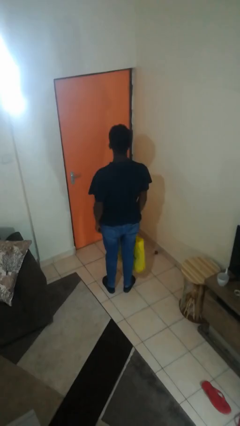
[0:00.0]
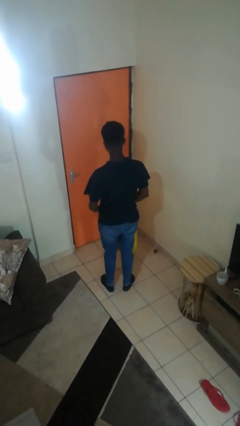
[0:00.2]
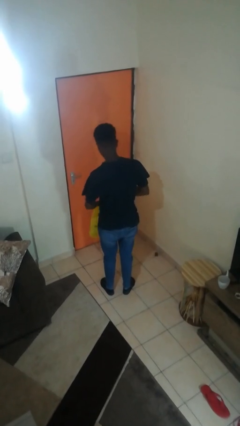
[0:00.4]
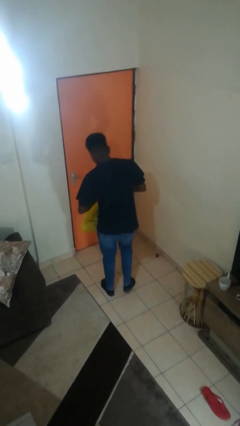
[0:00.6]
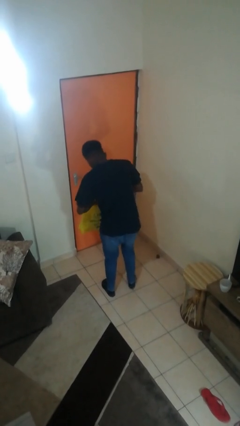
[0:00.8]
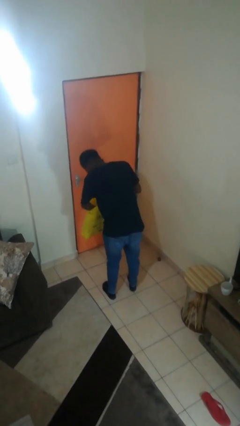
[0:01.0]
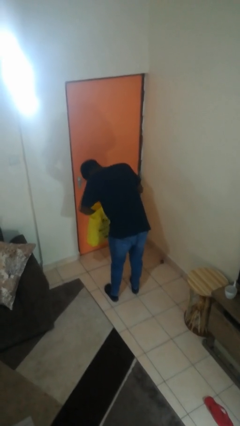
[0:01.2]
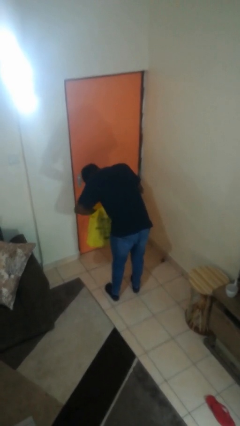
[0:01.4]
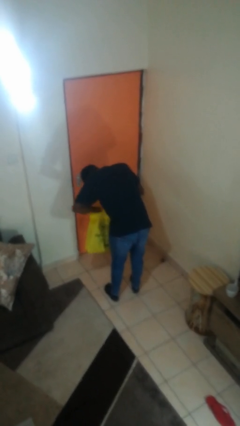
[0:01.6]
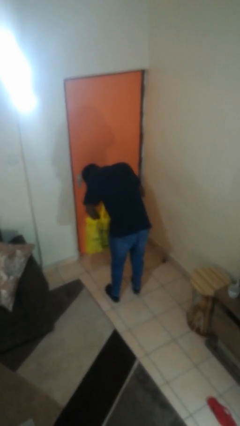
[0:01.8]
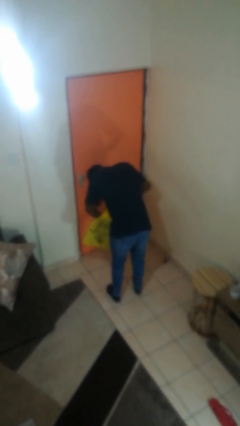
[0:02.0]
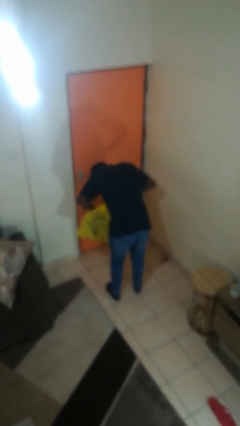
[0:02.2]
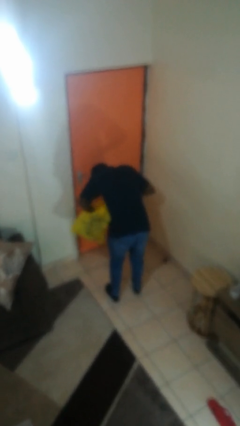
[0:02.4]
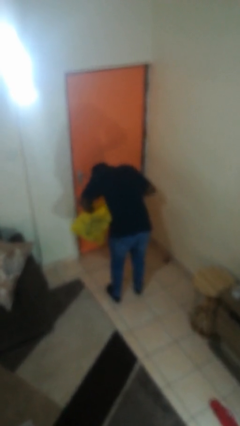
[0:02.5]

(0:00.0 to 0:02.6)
person searches in bag

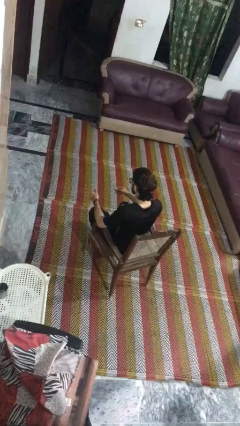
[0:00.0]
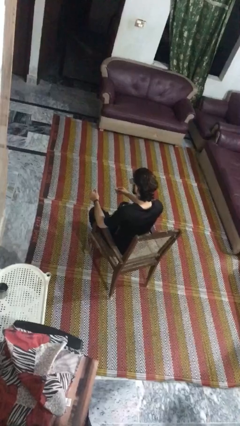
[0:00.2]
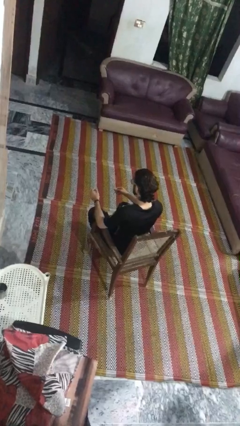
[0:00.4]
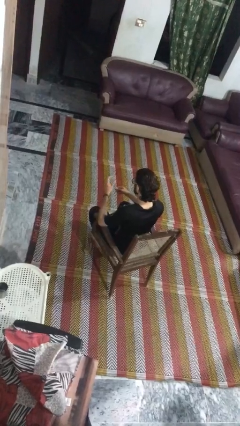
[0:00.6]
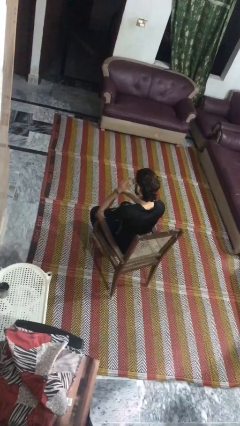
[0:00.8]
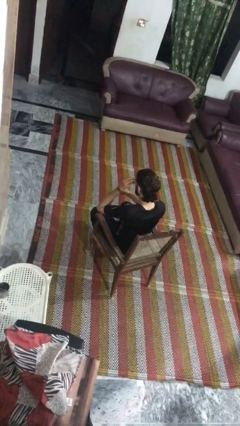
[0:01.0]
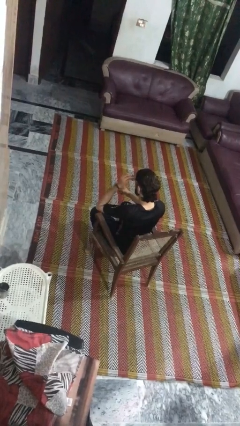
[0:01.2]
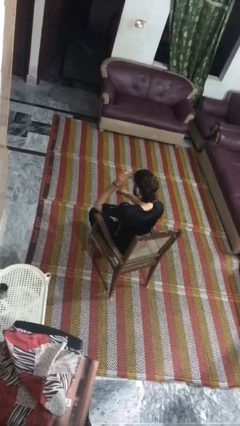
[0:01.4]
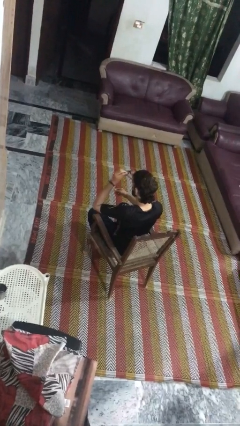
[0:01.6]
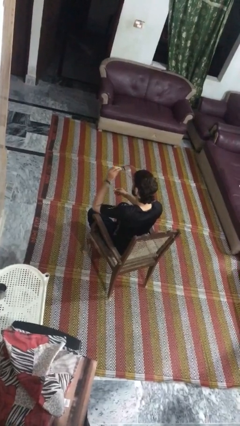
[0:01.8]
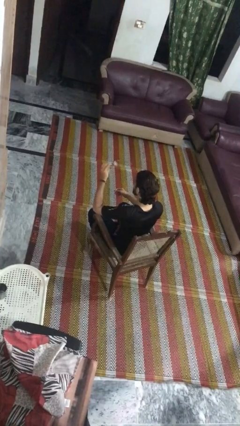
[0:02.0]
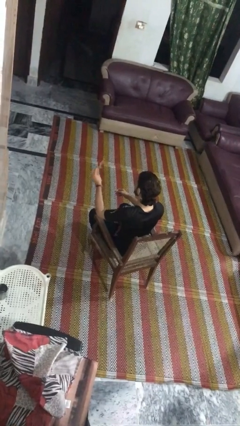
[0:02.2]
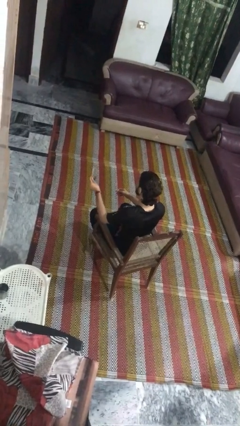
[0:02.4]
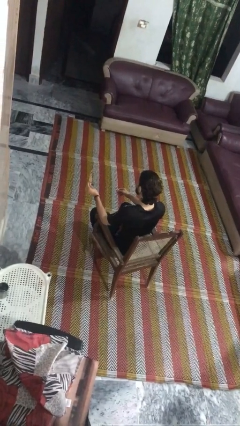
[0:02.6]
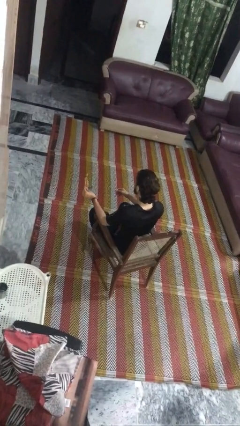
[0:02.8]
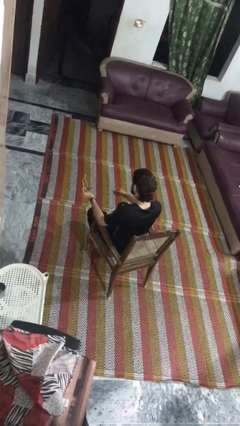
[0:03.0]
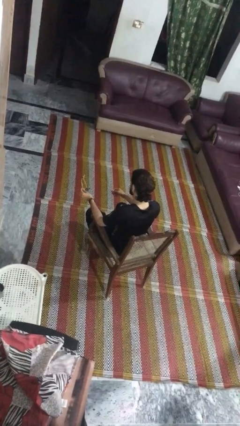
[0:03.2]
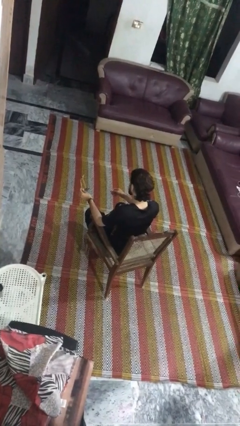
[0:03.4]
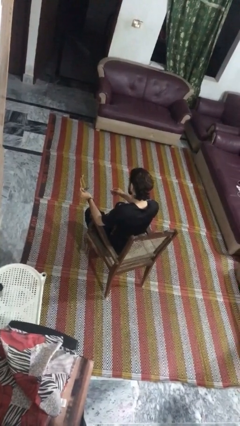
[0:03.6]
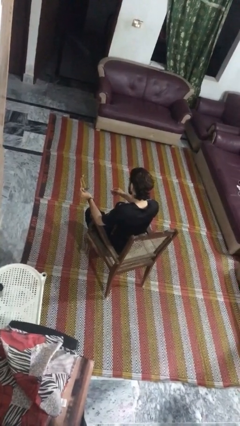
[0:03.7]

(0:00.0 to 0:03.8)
person takes off glasses

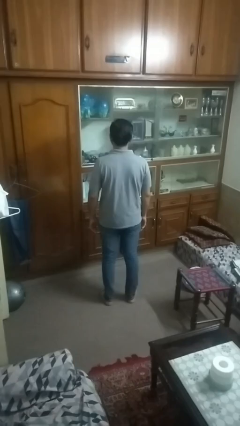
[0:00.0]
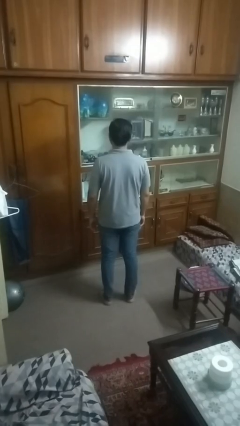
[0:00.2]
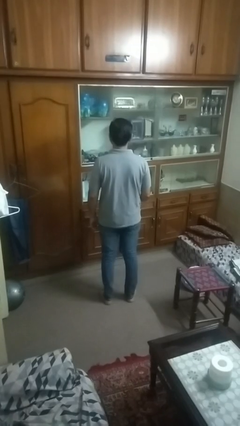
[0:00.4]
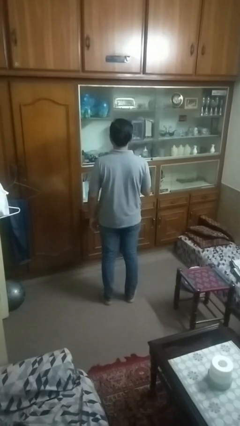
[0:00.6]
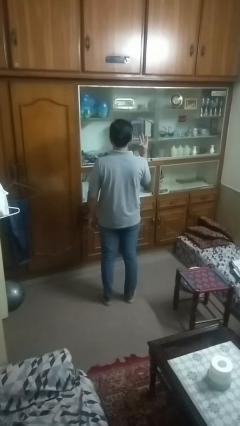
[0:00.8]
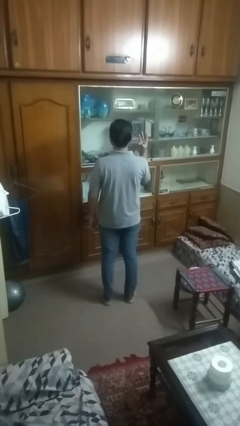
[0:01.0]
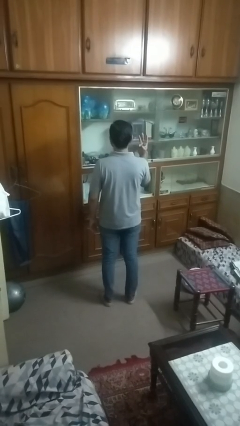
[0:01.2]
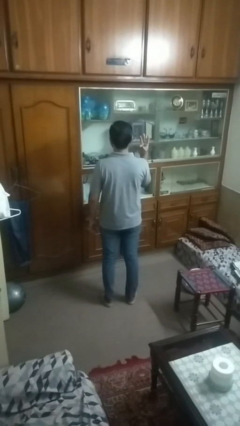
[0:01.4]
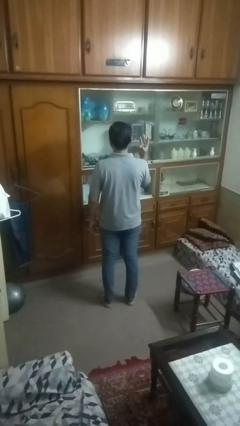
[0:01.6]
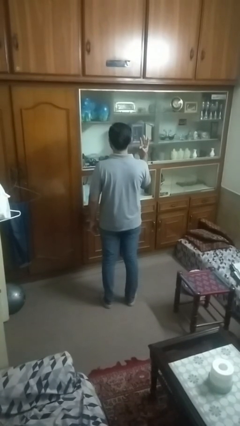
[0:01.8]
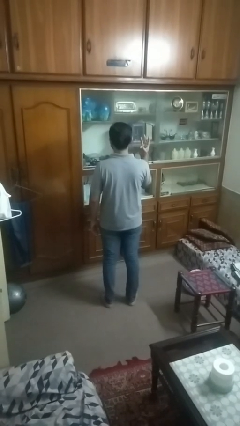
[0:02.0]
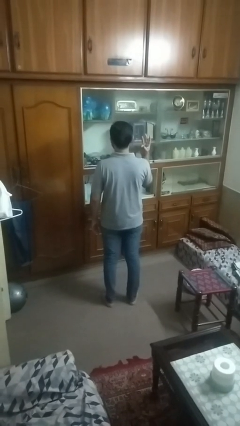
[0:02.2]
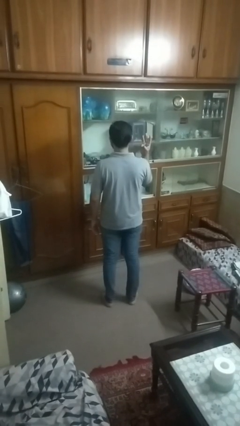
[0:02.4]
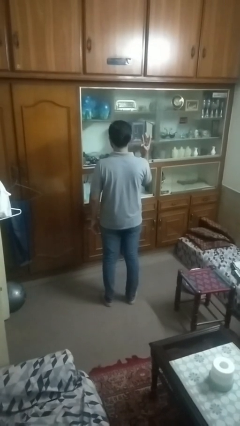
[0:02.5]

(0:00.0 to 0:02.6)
person gestures number three

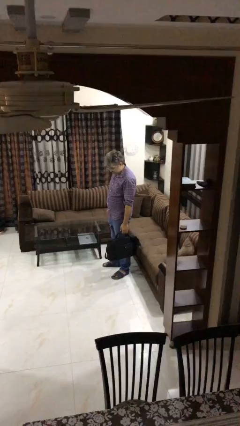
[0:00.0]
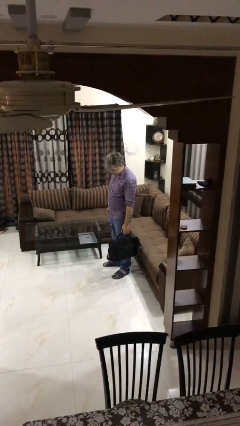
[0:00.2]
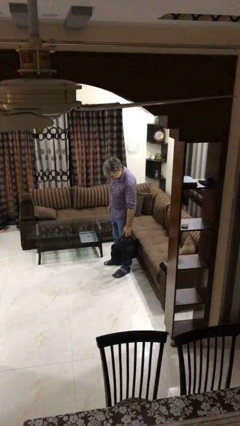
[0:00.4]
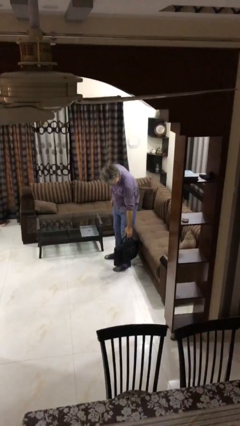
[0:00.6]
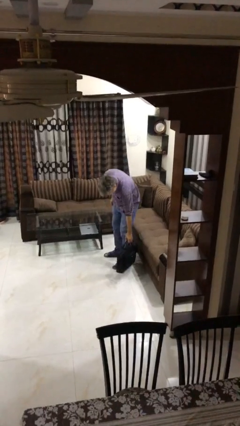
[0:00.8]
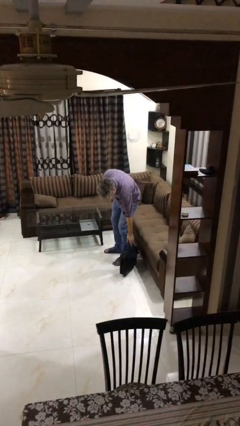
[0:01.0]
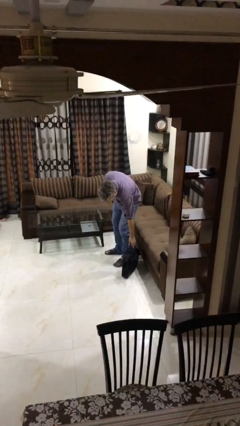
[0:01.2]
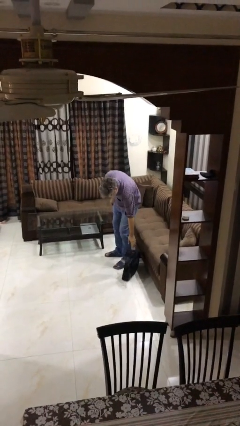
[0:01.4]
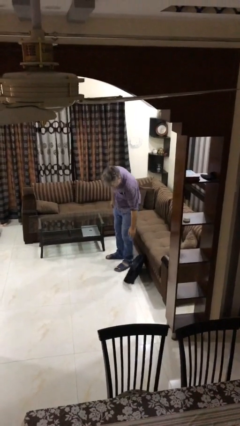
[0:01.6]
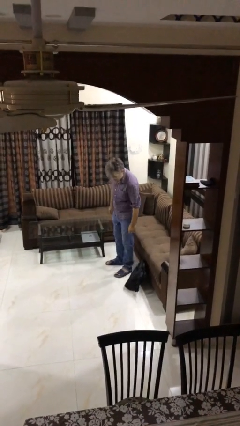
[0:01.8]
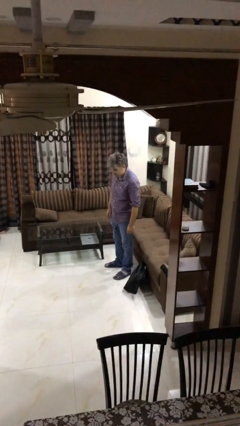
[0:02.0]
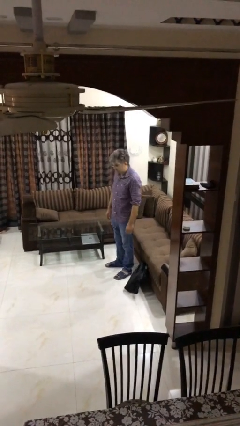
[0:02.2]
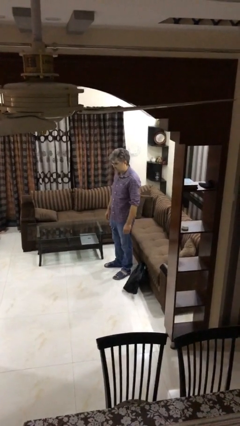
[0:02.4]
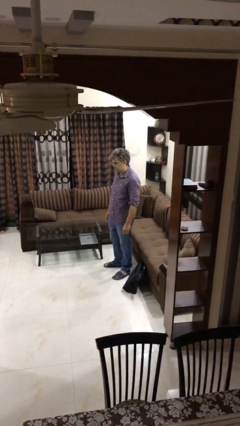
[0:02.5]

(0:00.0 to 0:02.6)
person puts down object on floor

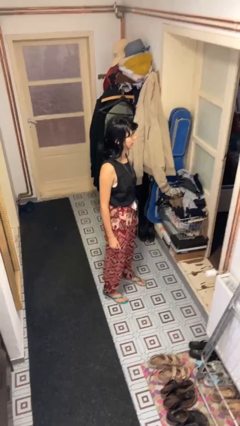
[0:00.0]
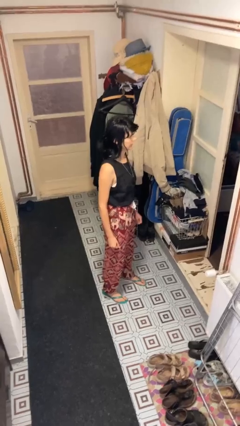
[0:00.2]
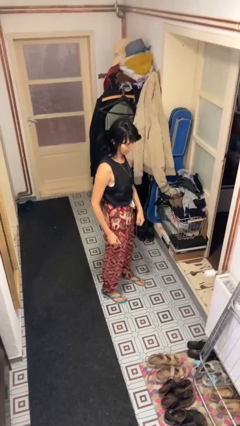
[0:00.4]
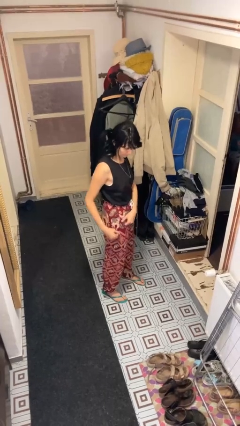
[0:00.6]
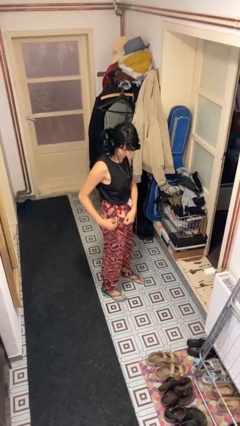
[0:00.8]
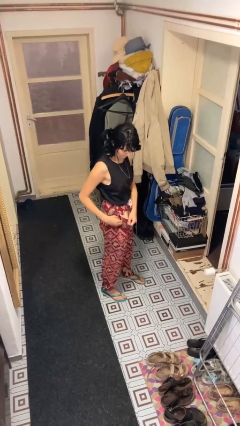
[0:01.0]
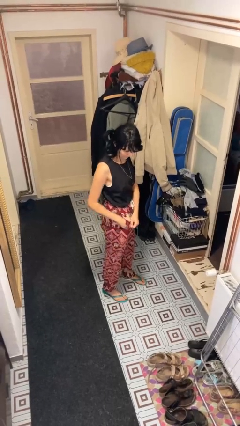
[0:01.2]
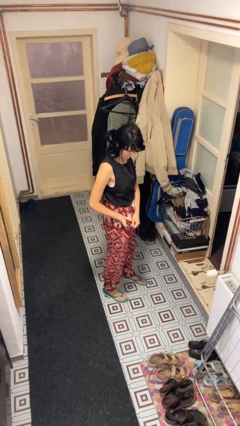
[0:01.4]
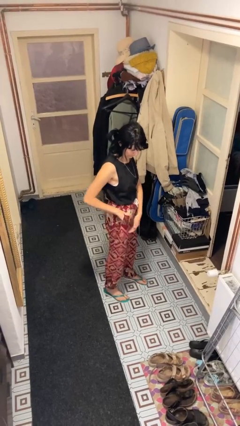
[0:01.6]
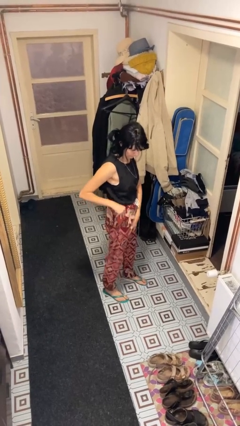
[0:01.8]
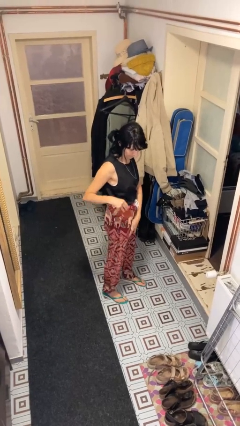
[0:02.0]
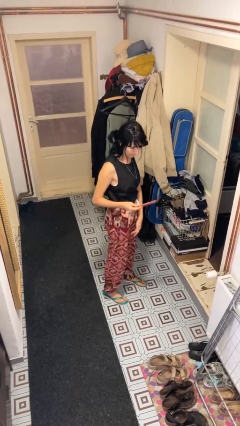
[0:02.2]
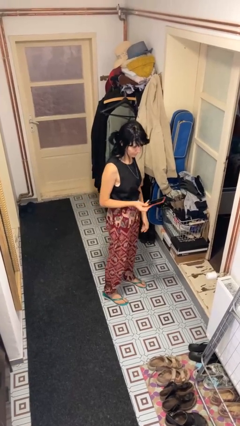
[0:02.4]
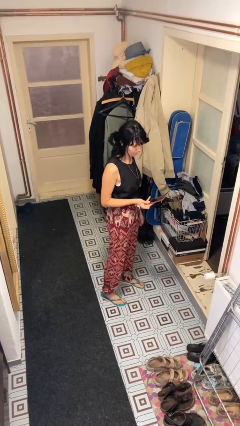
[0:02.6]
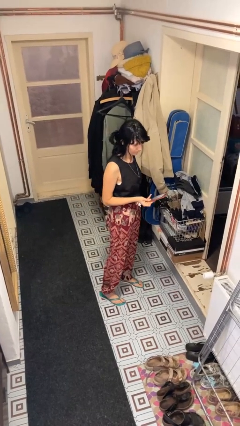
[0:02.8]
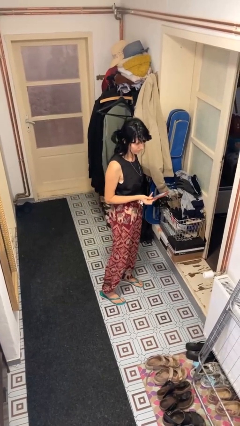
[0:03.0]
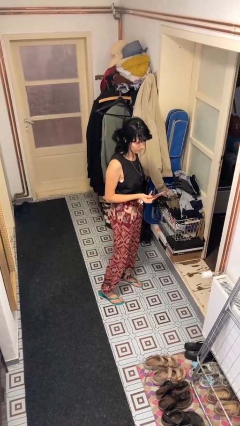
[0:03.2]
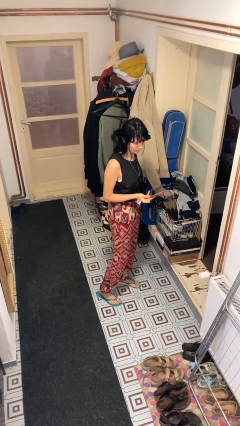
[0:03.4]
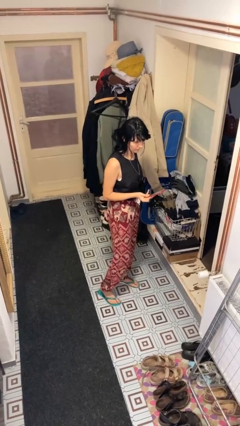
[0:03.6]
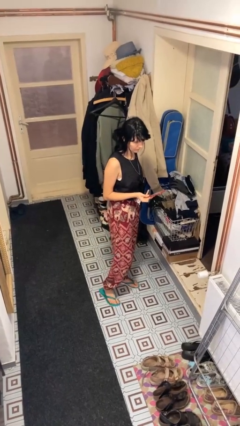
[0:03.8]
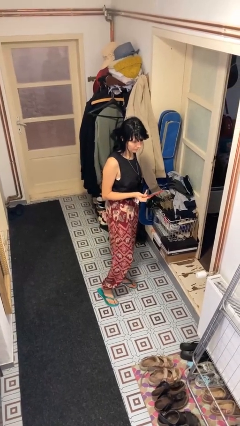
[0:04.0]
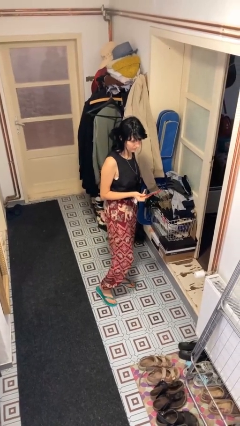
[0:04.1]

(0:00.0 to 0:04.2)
person takes phone from pocket

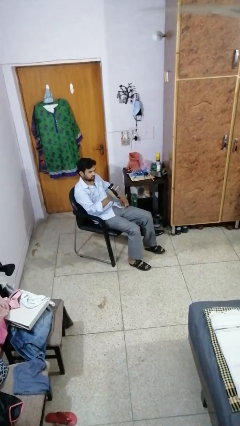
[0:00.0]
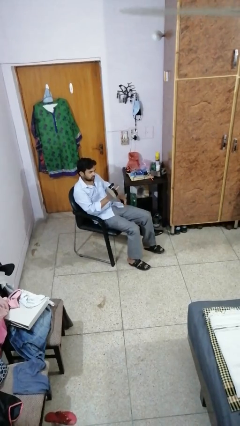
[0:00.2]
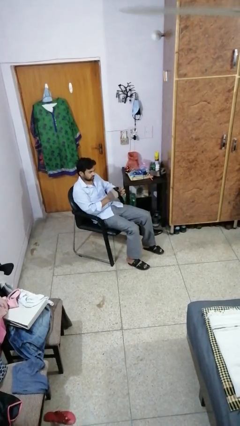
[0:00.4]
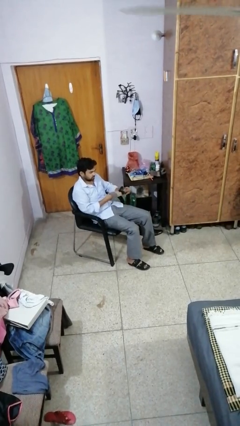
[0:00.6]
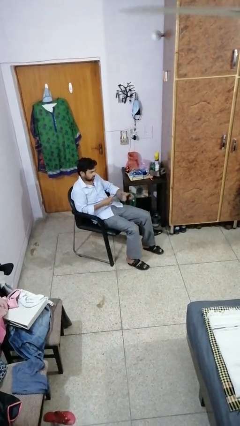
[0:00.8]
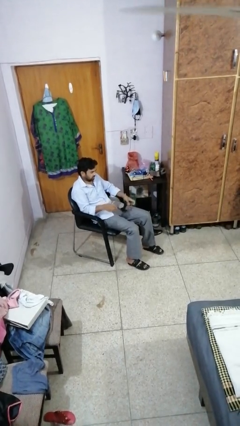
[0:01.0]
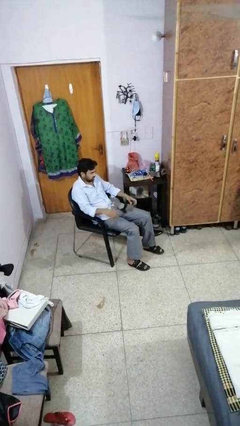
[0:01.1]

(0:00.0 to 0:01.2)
person takes off gloves
